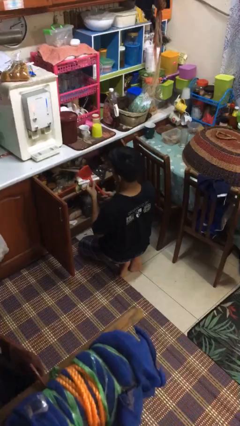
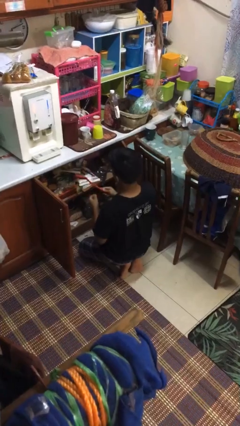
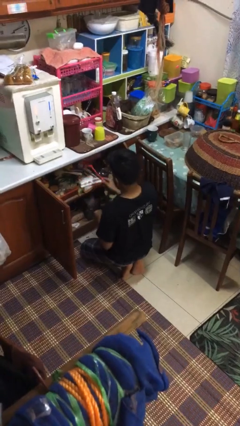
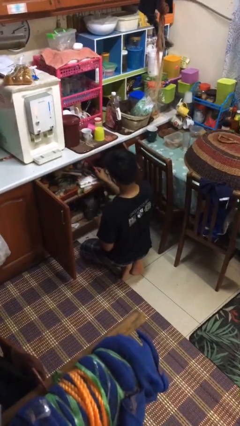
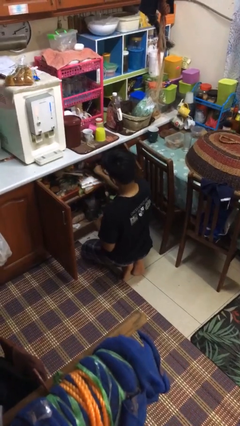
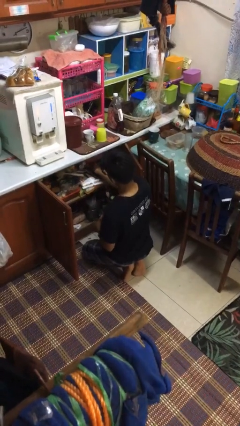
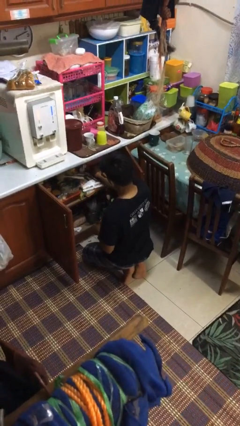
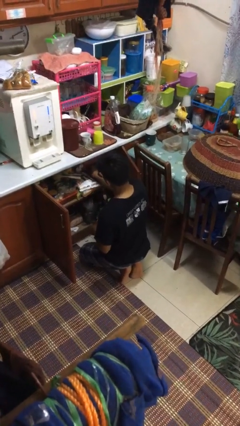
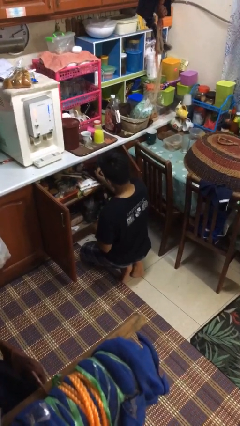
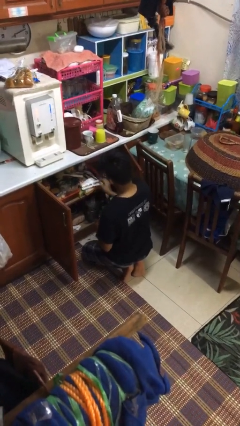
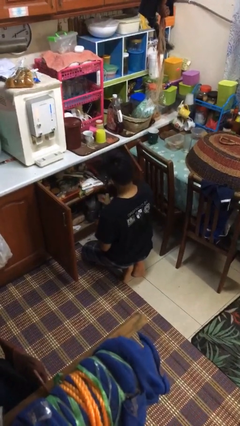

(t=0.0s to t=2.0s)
person puts object into kitchen drawer

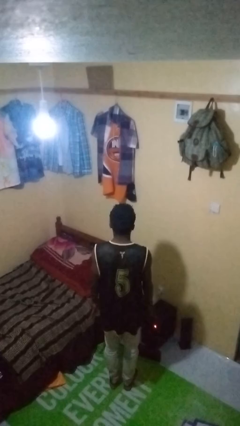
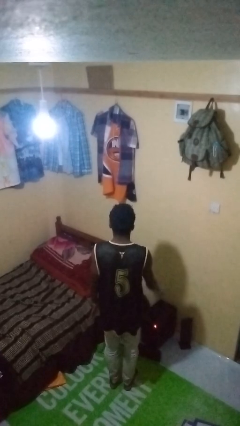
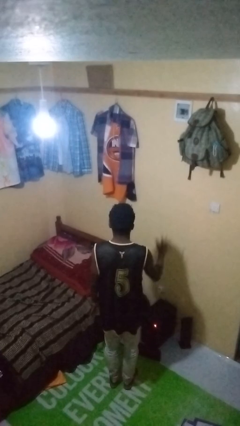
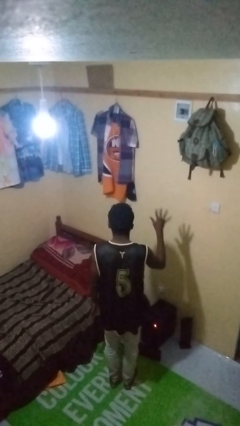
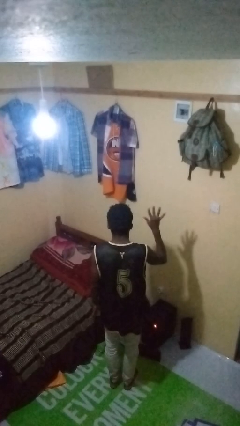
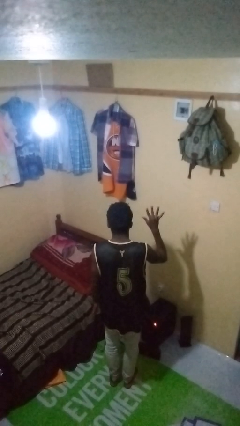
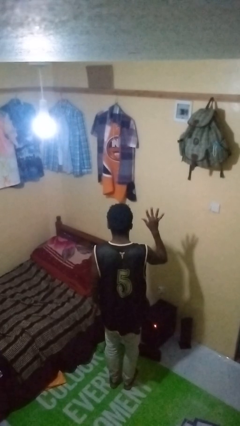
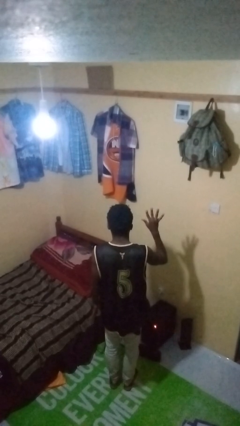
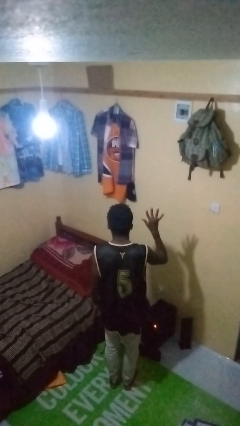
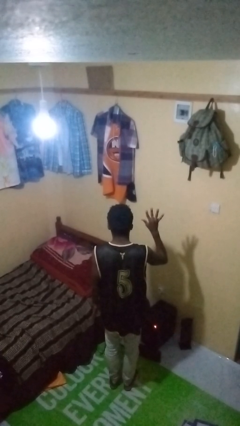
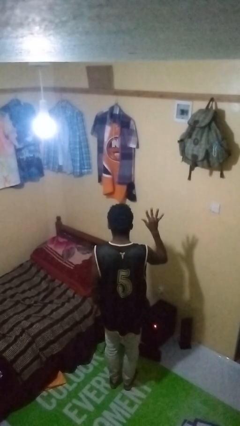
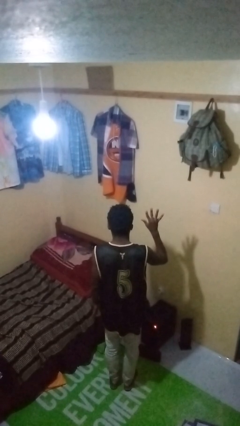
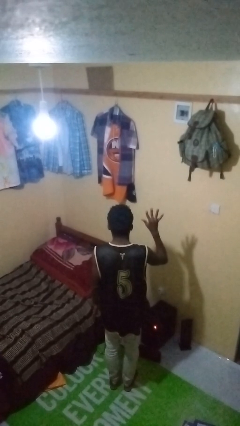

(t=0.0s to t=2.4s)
person gestures number five

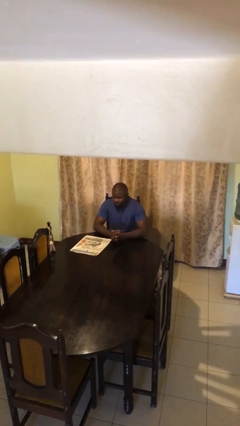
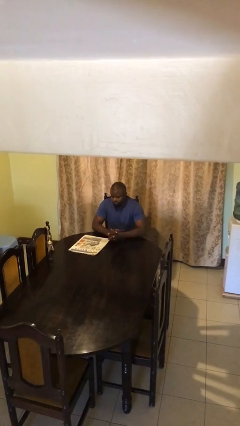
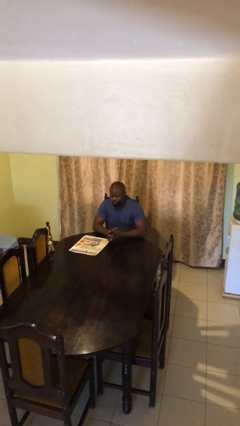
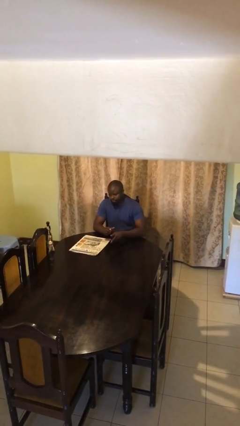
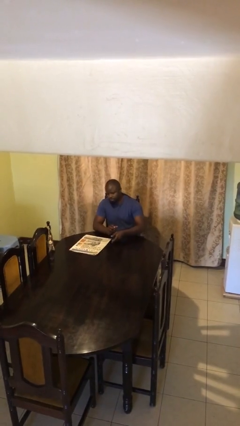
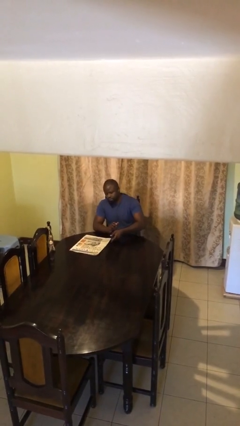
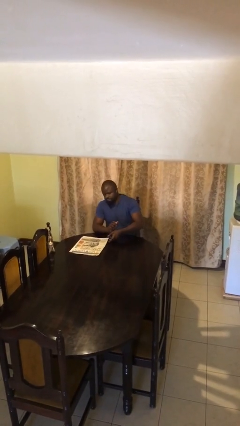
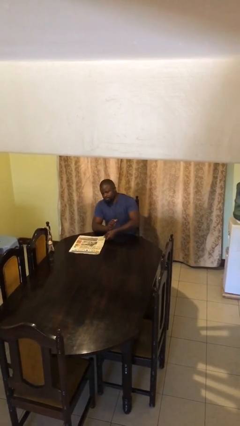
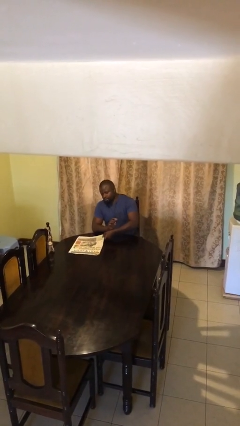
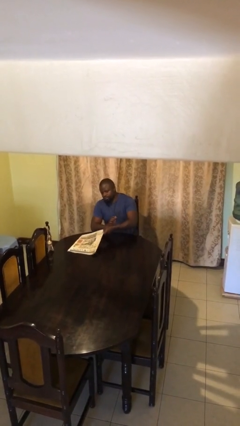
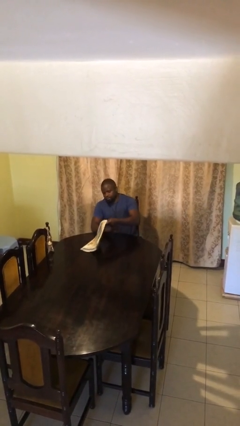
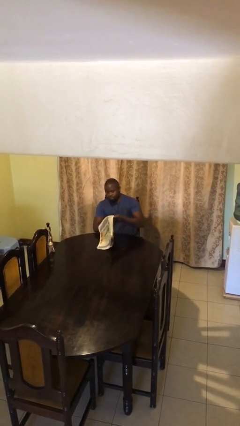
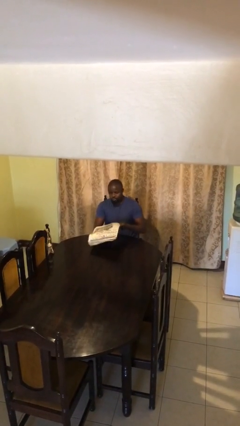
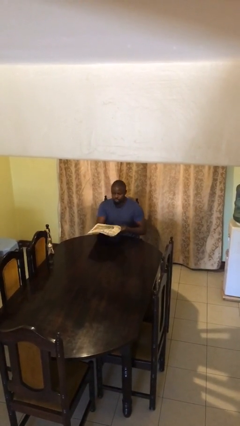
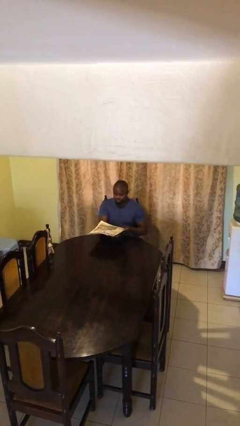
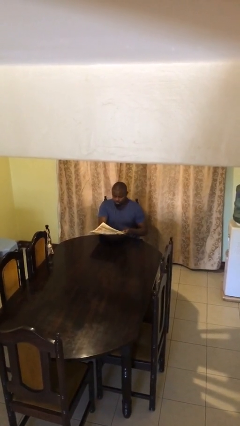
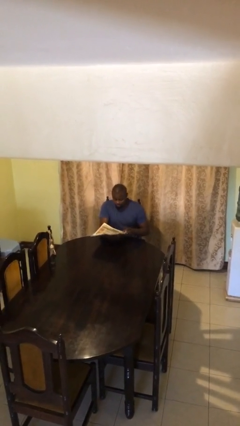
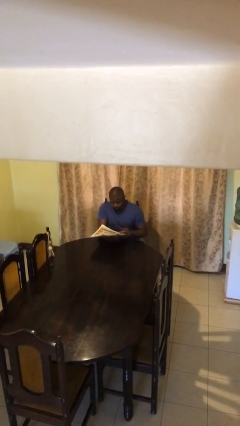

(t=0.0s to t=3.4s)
person picks up object from table

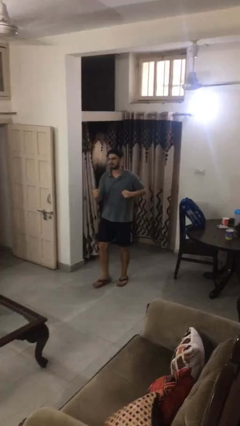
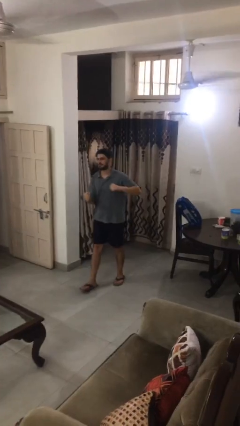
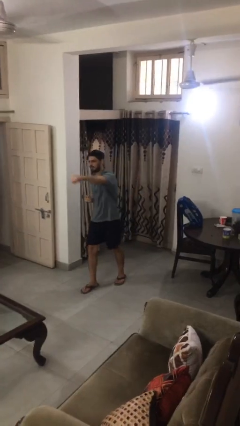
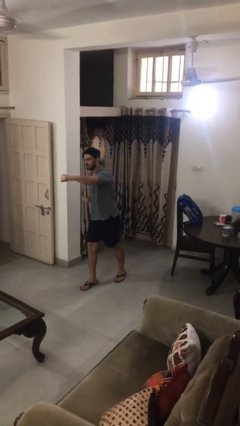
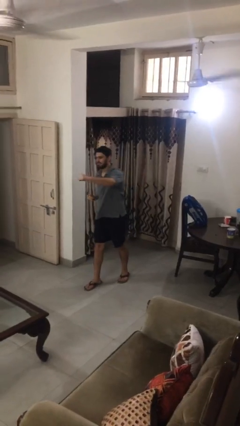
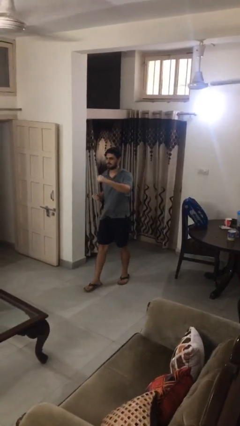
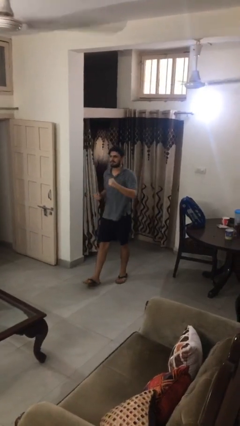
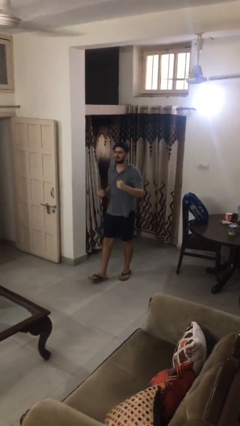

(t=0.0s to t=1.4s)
person punches

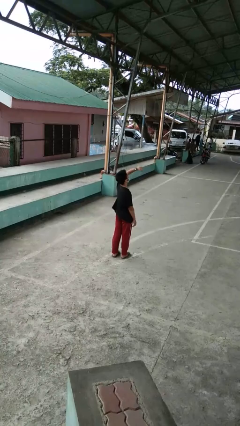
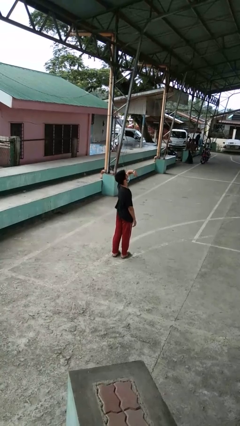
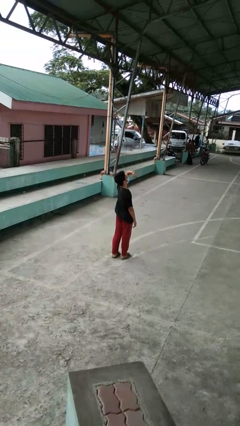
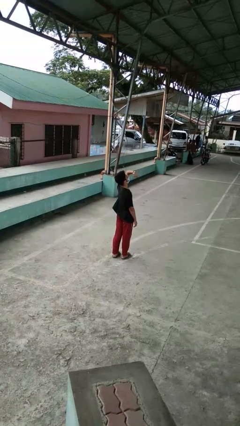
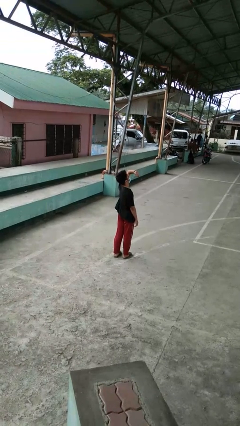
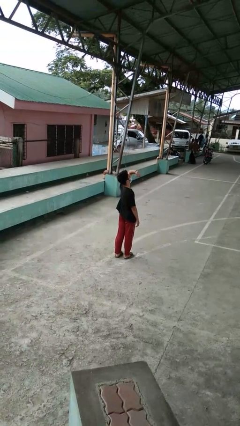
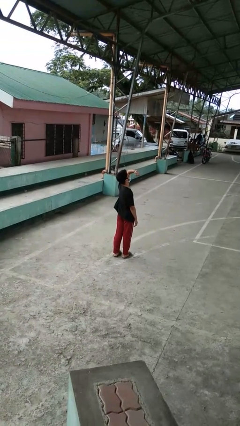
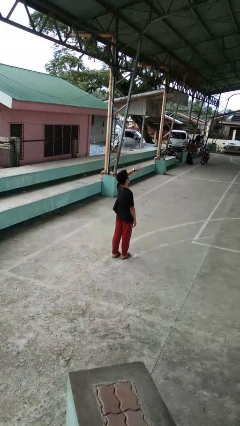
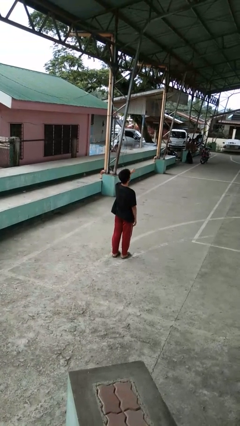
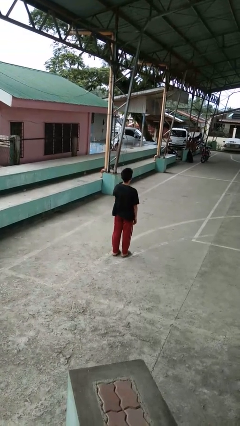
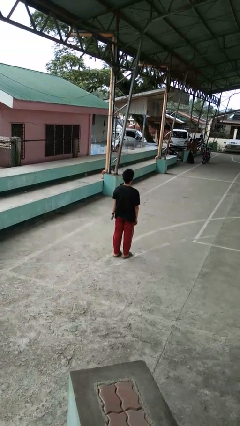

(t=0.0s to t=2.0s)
person looks at wristwatch

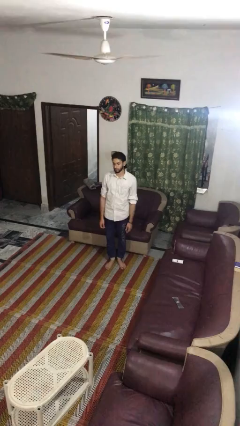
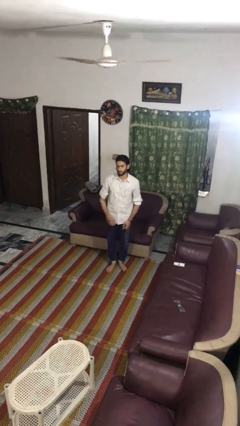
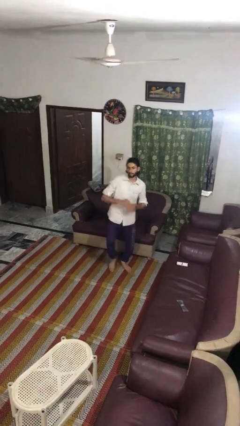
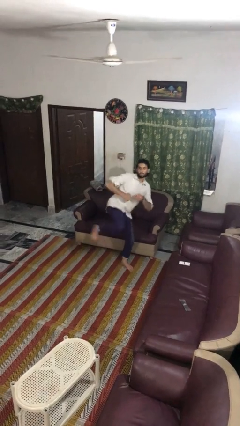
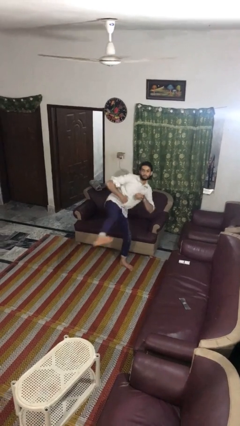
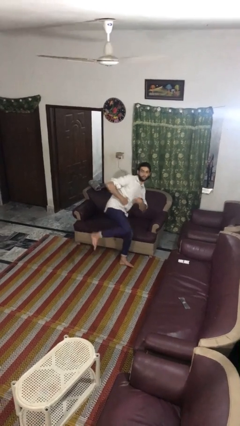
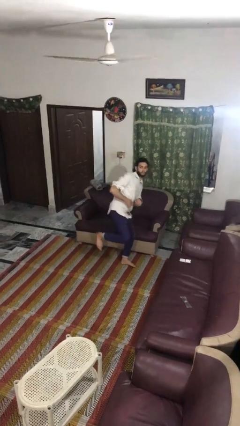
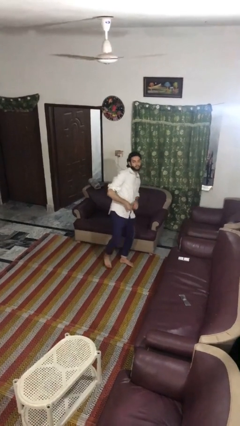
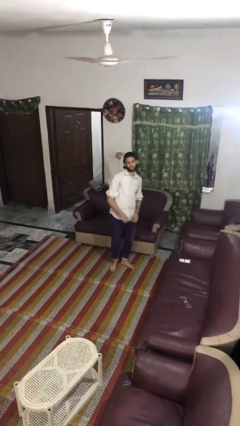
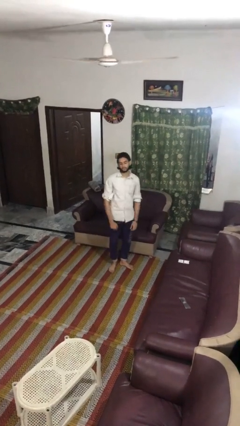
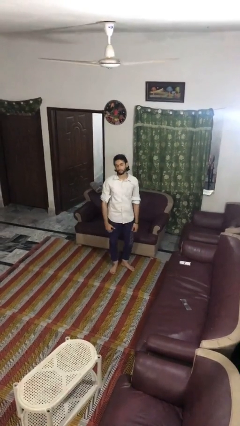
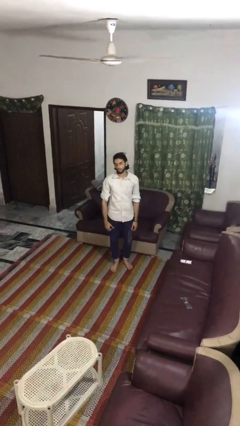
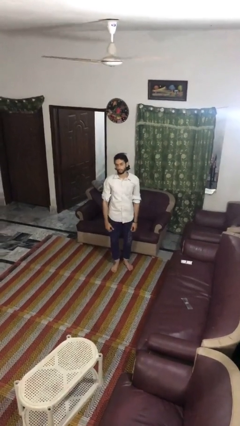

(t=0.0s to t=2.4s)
person karate kicks

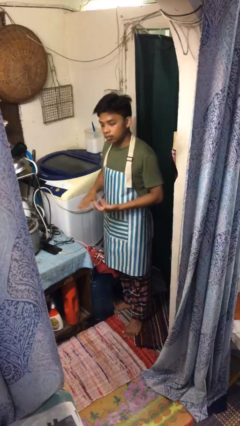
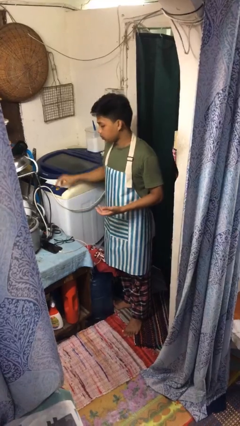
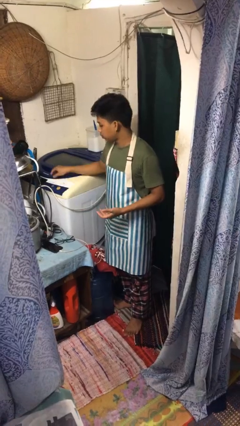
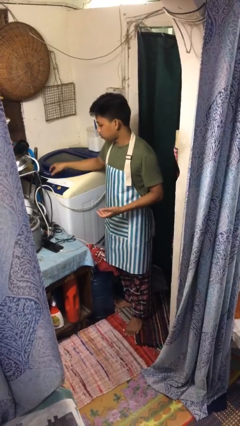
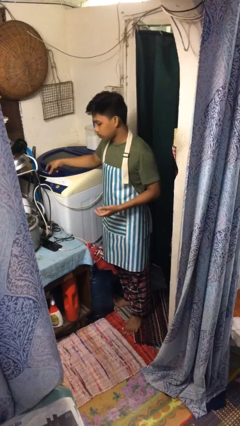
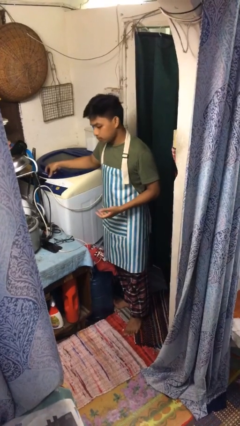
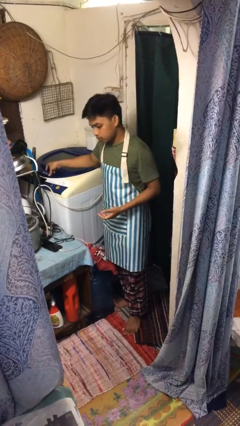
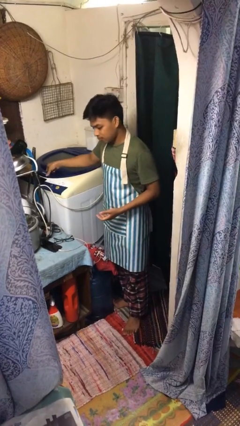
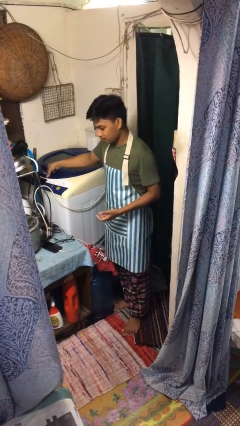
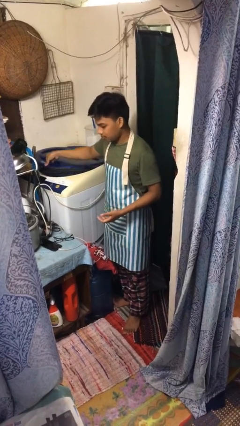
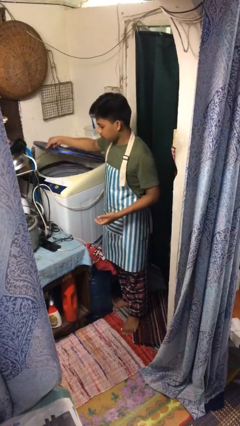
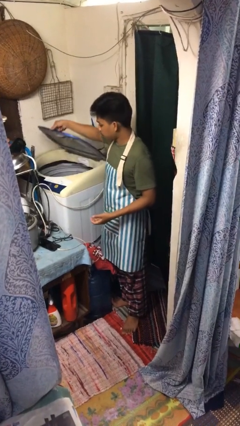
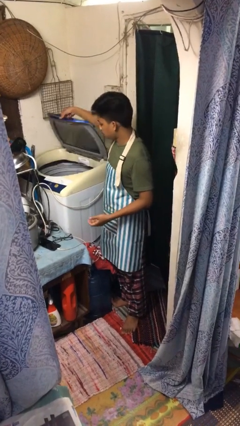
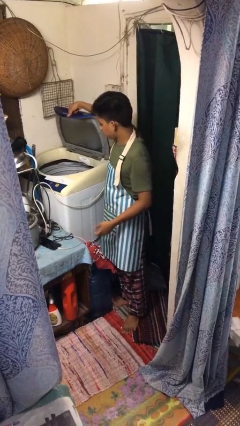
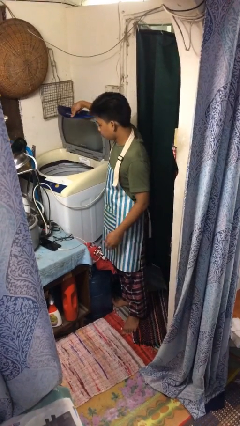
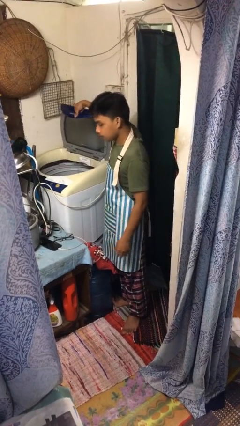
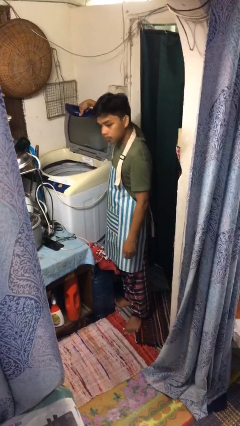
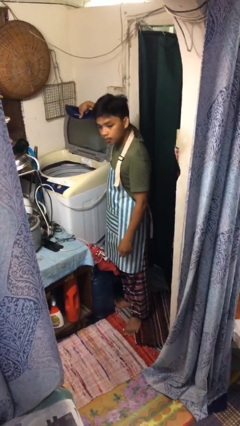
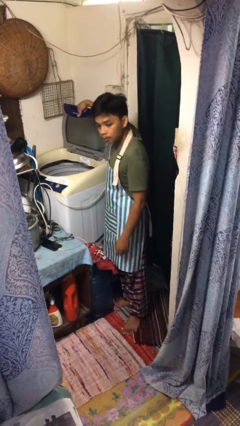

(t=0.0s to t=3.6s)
person opens clothes washer
